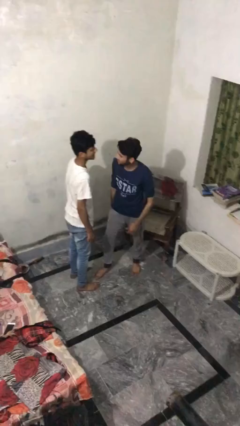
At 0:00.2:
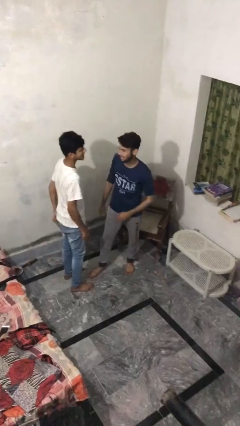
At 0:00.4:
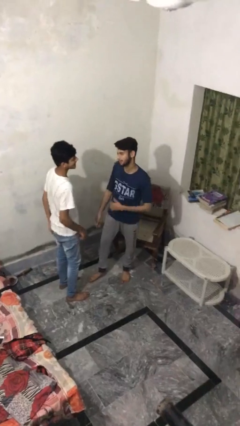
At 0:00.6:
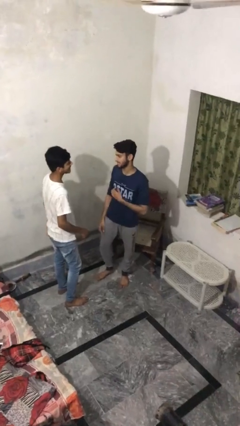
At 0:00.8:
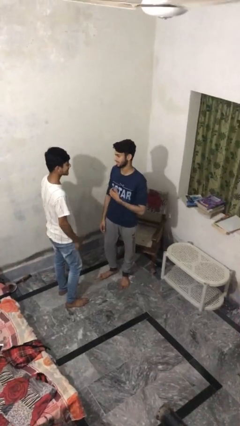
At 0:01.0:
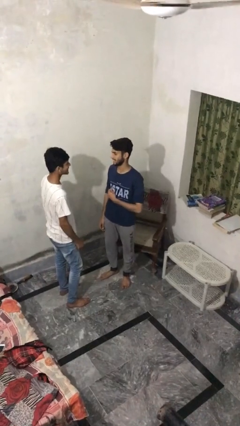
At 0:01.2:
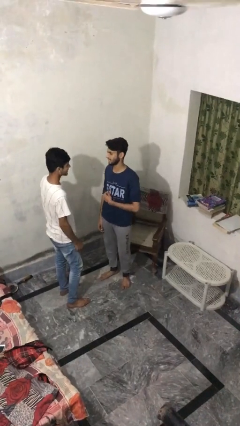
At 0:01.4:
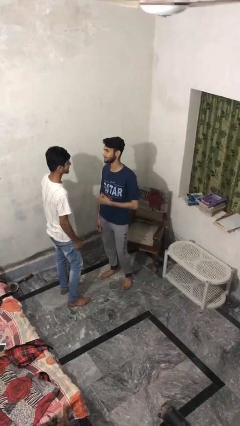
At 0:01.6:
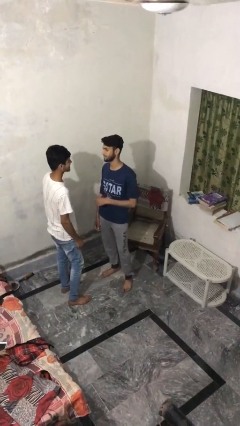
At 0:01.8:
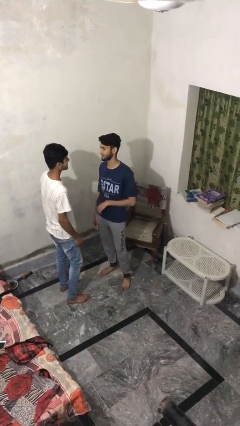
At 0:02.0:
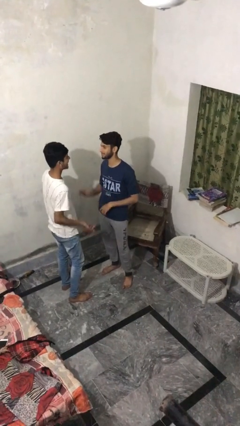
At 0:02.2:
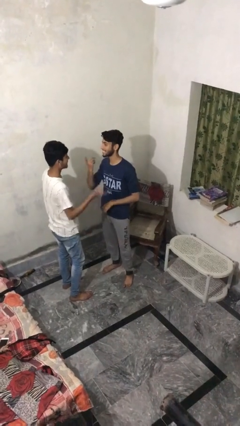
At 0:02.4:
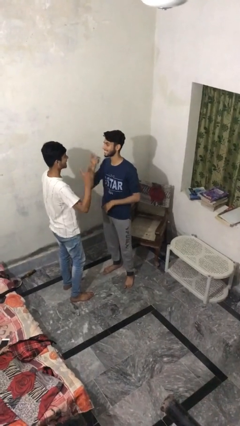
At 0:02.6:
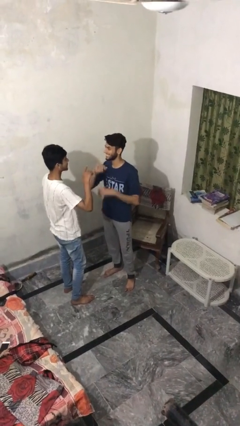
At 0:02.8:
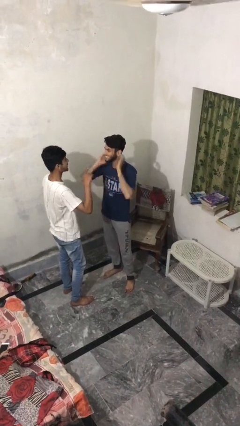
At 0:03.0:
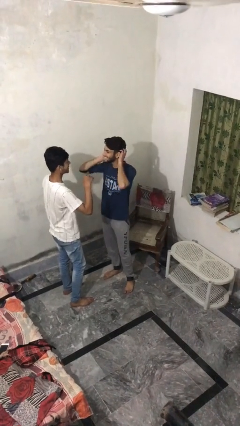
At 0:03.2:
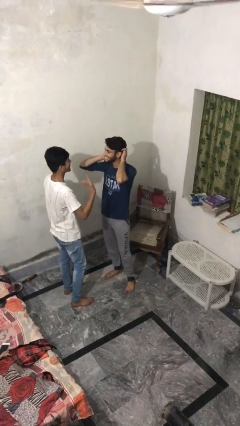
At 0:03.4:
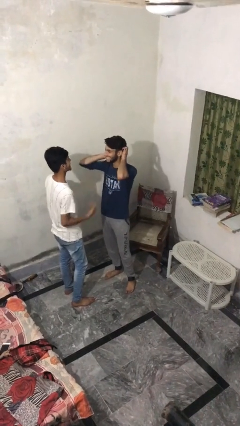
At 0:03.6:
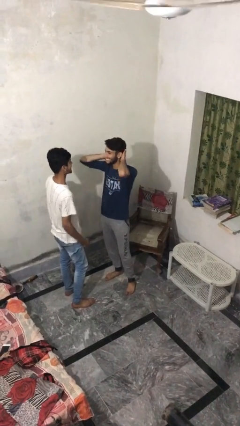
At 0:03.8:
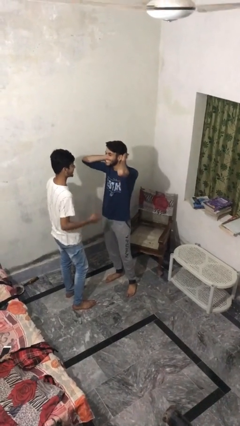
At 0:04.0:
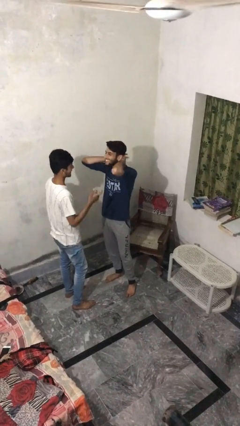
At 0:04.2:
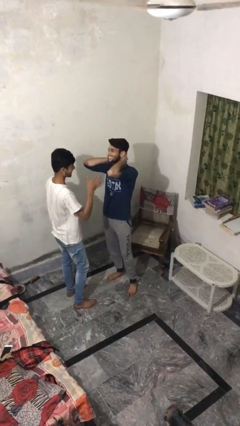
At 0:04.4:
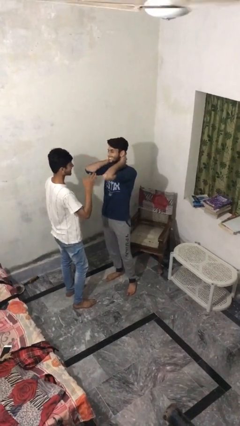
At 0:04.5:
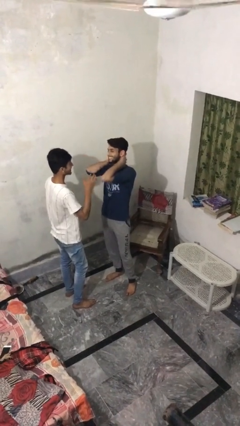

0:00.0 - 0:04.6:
person talks to person

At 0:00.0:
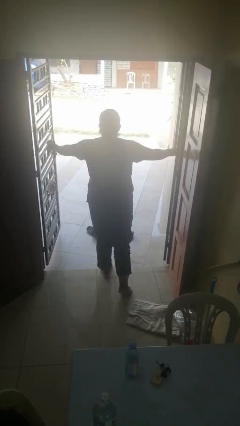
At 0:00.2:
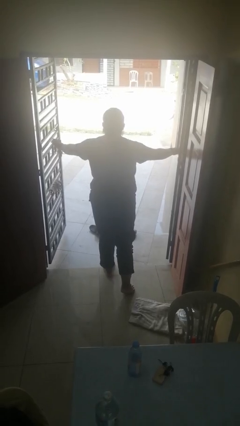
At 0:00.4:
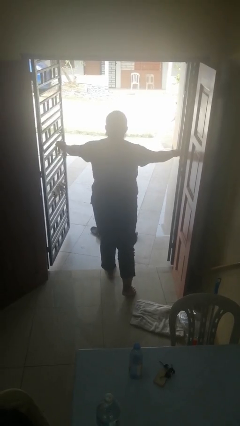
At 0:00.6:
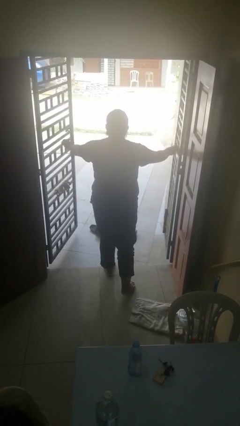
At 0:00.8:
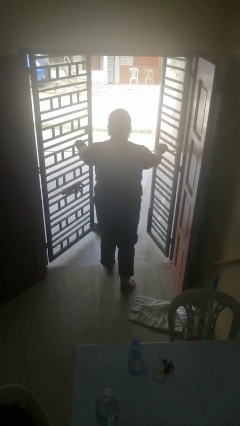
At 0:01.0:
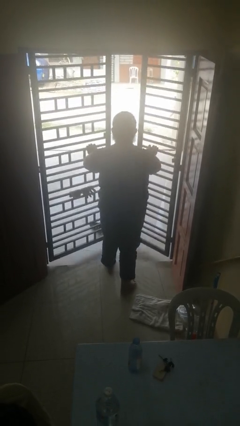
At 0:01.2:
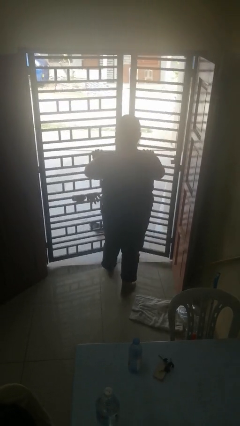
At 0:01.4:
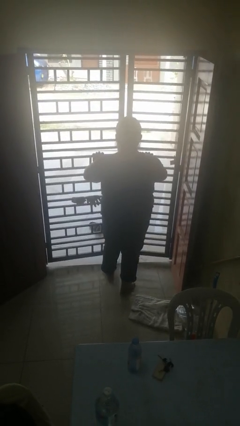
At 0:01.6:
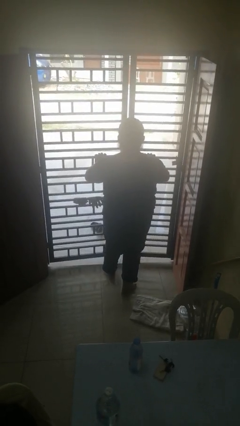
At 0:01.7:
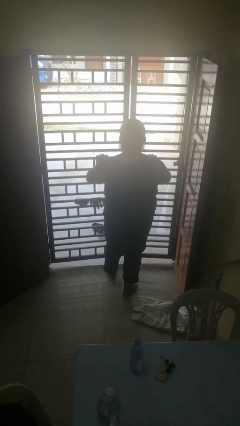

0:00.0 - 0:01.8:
person closes gate

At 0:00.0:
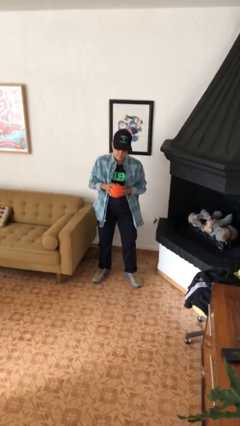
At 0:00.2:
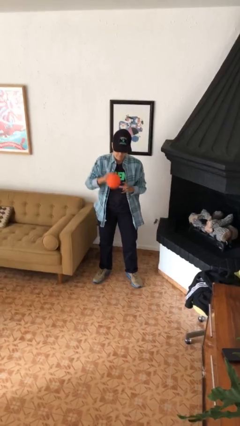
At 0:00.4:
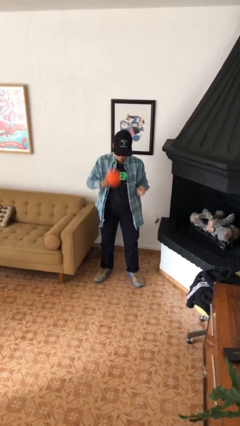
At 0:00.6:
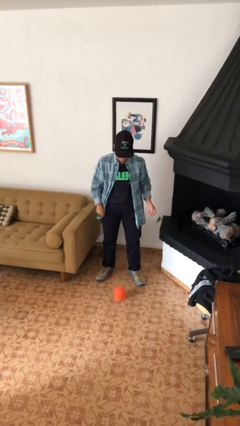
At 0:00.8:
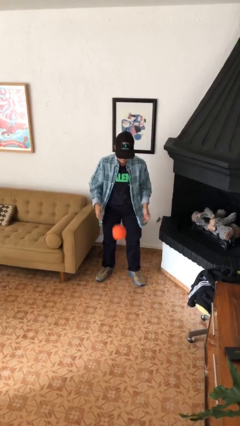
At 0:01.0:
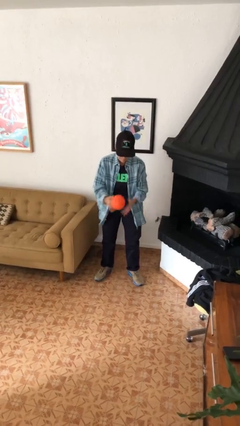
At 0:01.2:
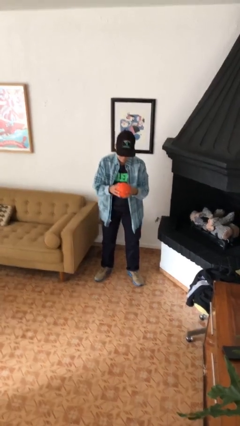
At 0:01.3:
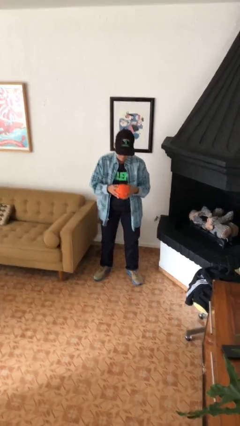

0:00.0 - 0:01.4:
person bounces ball on floor

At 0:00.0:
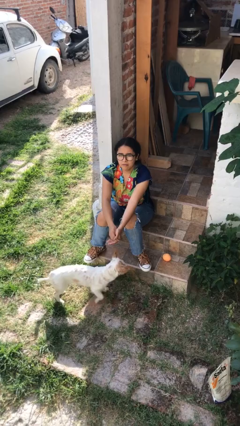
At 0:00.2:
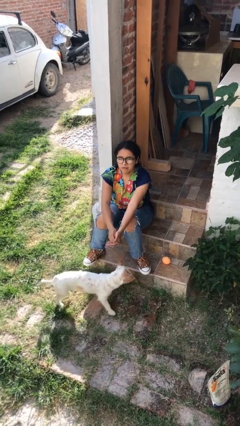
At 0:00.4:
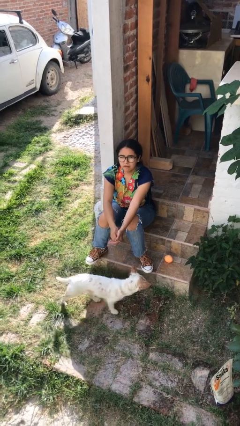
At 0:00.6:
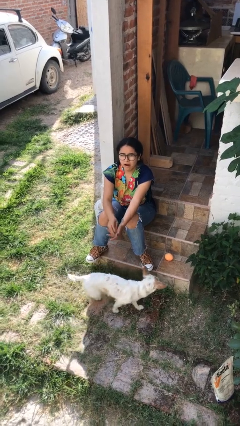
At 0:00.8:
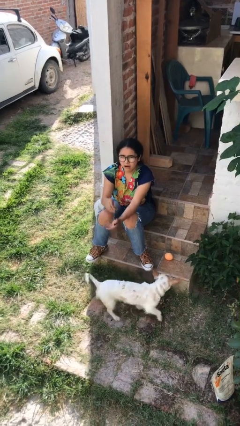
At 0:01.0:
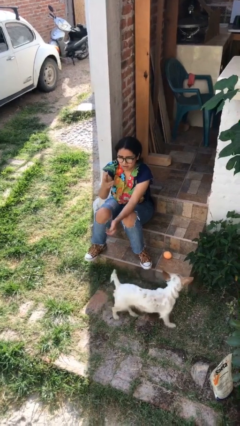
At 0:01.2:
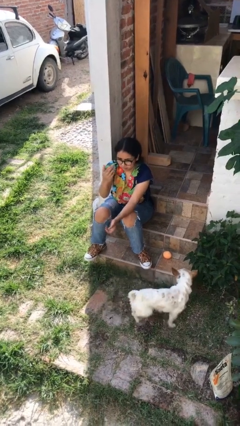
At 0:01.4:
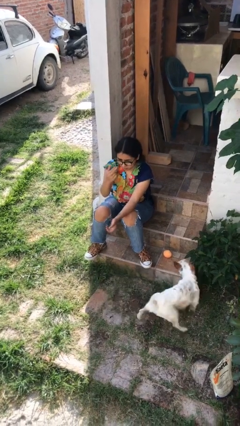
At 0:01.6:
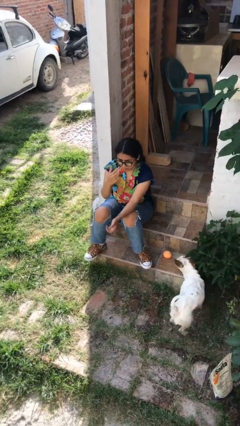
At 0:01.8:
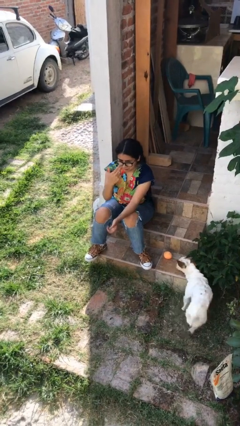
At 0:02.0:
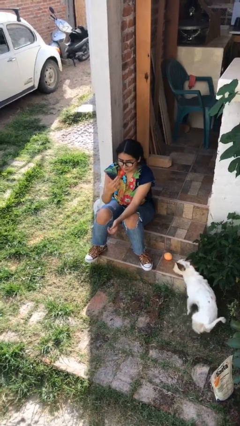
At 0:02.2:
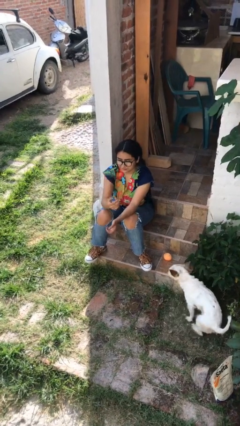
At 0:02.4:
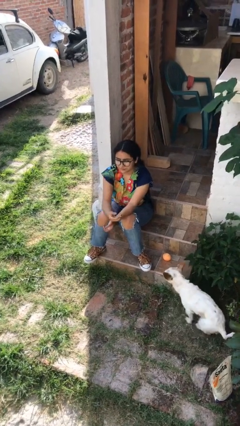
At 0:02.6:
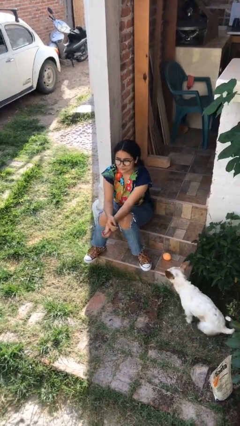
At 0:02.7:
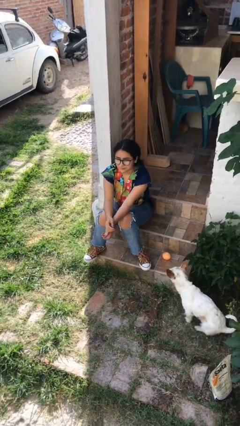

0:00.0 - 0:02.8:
person gestures come here

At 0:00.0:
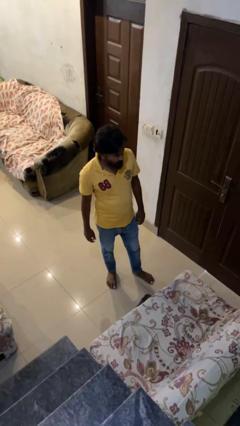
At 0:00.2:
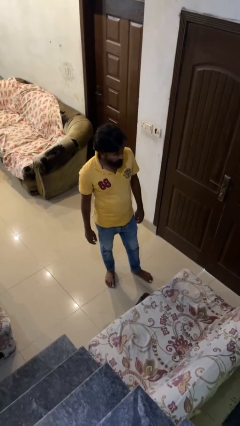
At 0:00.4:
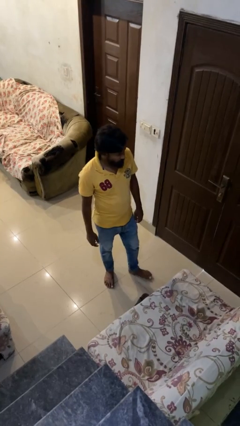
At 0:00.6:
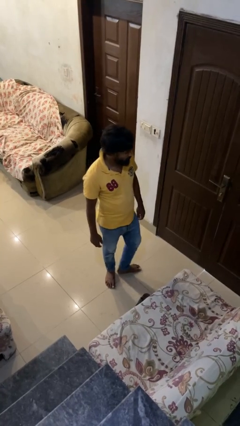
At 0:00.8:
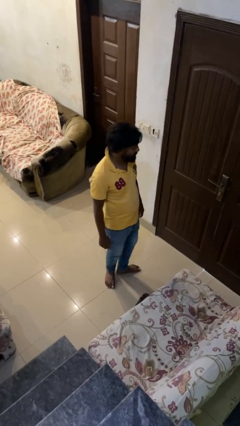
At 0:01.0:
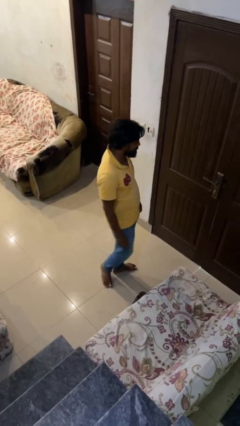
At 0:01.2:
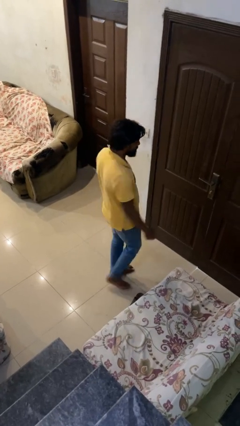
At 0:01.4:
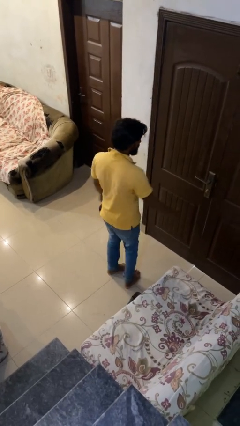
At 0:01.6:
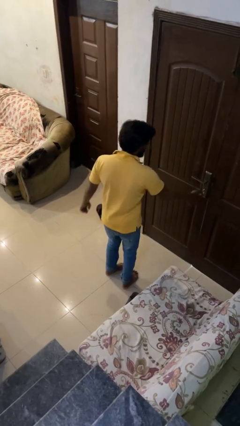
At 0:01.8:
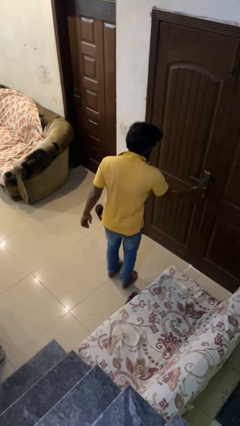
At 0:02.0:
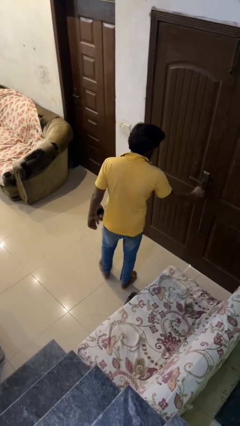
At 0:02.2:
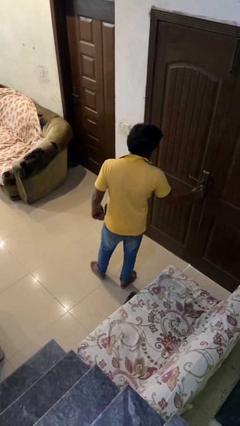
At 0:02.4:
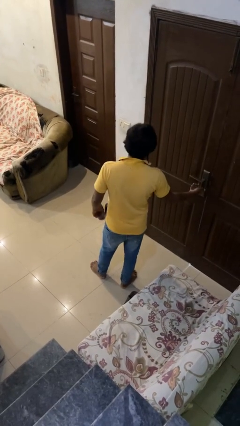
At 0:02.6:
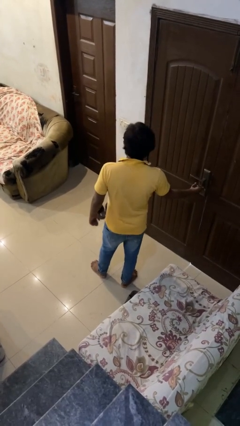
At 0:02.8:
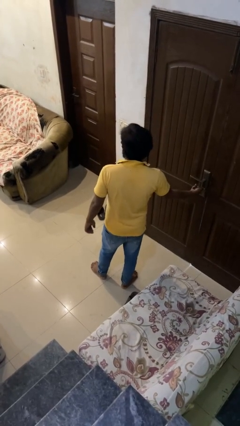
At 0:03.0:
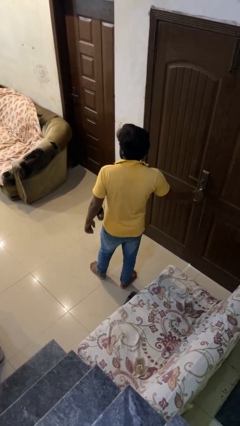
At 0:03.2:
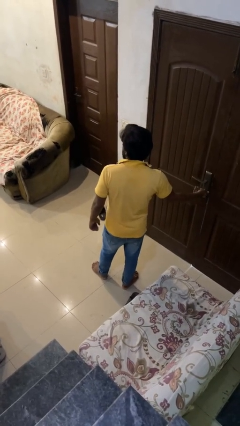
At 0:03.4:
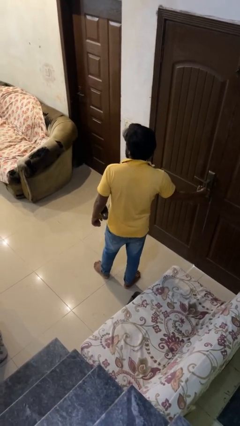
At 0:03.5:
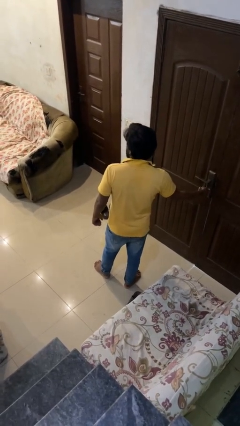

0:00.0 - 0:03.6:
person unlocks door with keys

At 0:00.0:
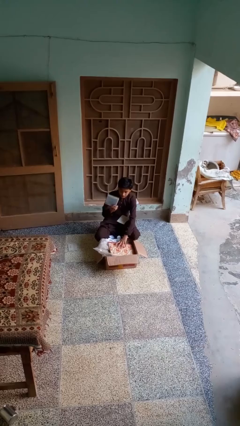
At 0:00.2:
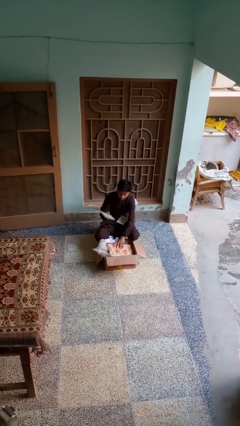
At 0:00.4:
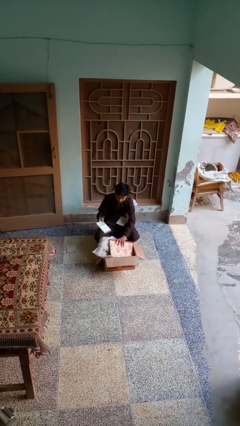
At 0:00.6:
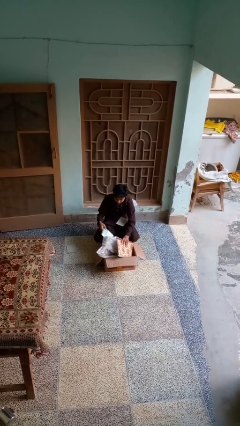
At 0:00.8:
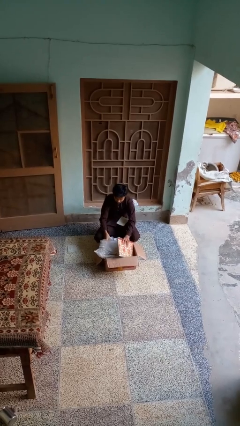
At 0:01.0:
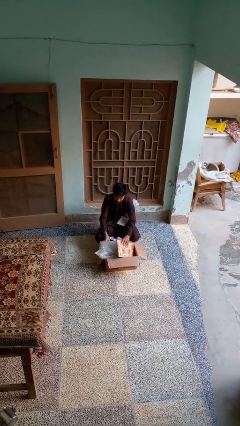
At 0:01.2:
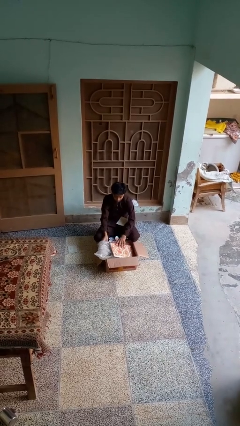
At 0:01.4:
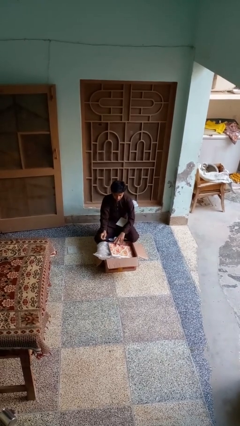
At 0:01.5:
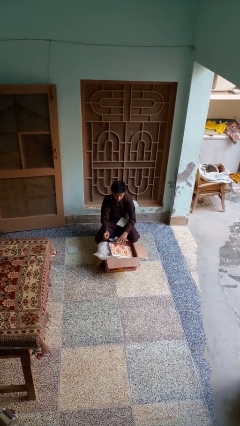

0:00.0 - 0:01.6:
person puts object into box

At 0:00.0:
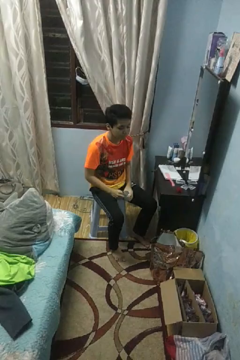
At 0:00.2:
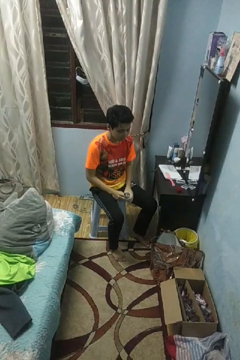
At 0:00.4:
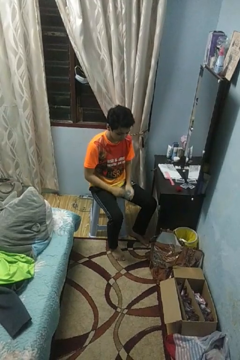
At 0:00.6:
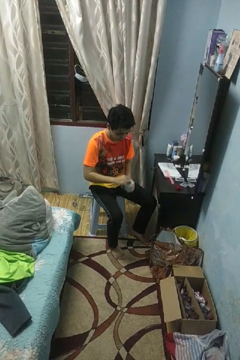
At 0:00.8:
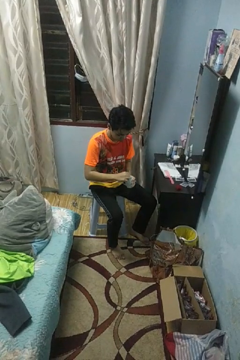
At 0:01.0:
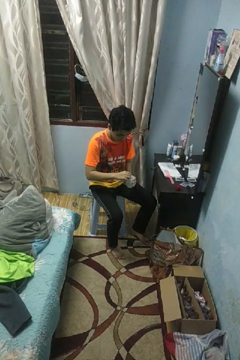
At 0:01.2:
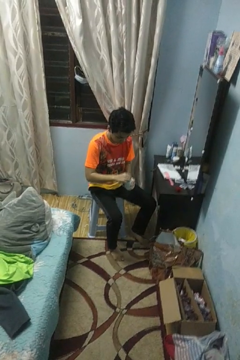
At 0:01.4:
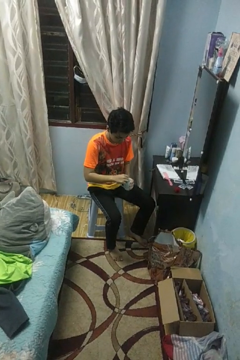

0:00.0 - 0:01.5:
person stirs mug
